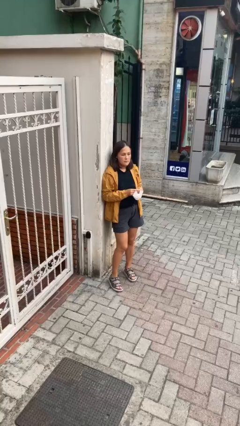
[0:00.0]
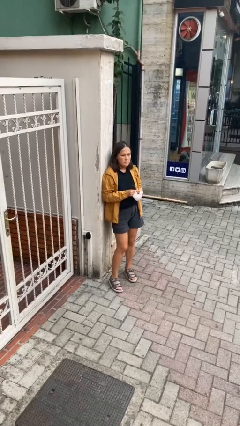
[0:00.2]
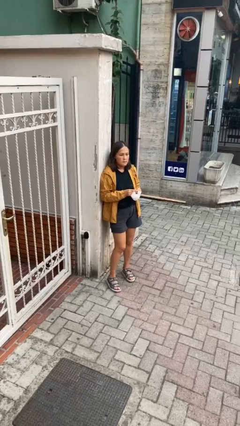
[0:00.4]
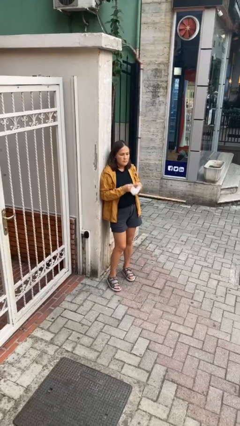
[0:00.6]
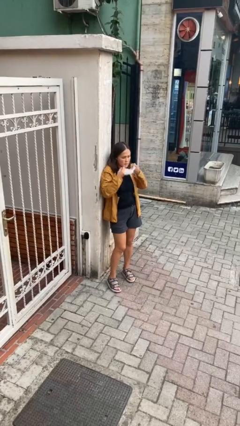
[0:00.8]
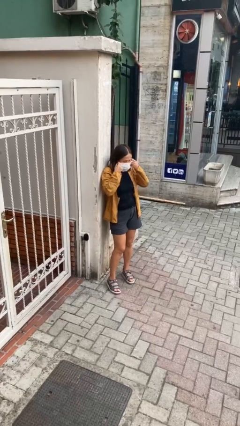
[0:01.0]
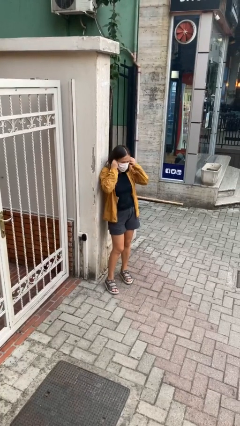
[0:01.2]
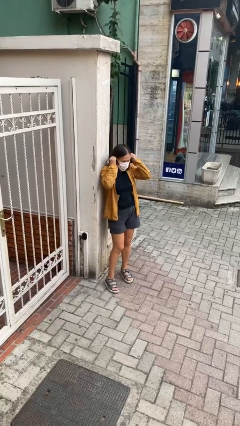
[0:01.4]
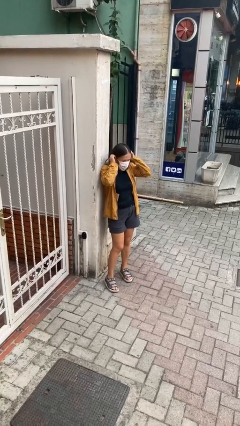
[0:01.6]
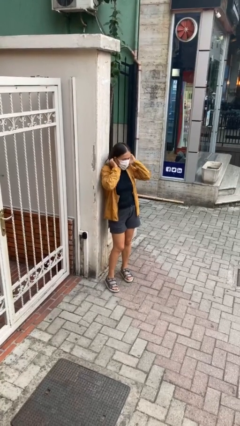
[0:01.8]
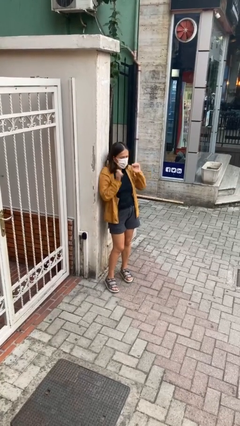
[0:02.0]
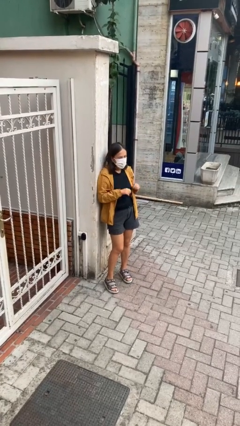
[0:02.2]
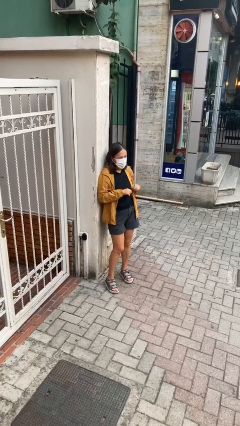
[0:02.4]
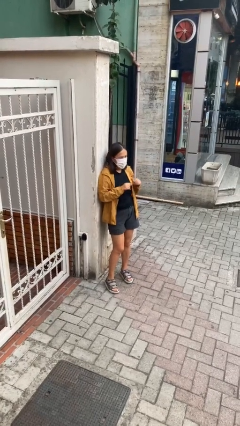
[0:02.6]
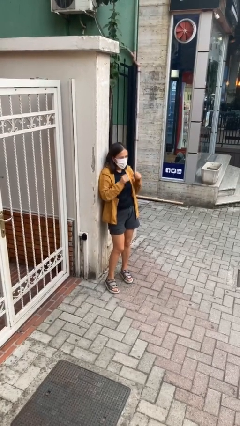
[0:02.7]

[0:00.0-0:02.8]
person puts on facemask

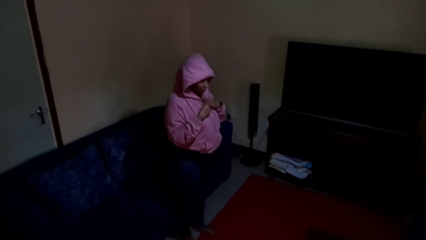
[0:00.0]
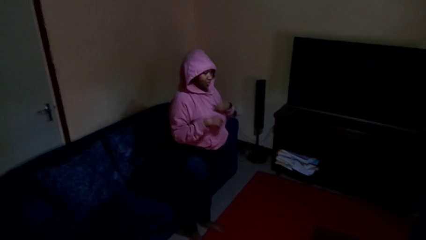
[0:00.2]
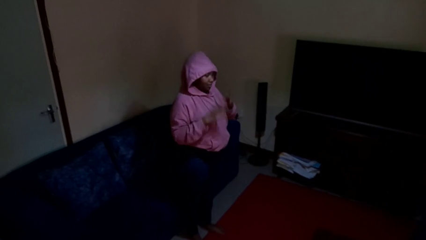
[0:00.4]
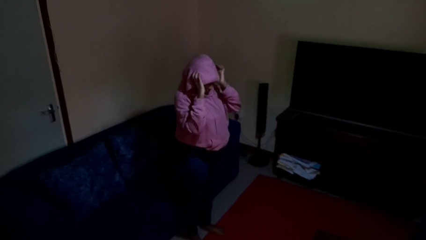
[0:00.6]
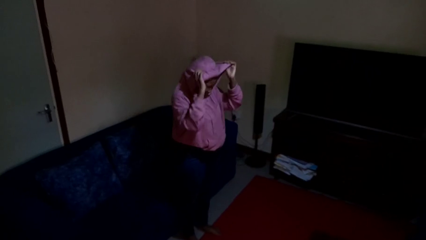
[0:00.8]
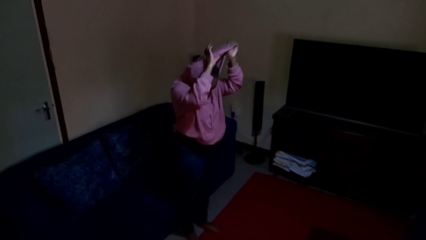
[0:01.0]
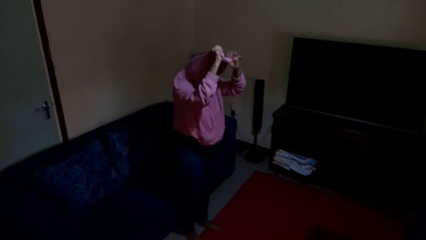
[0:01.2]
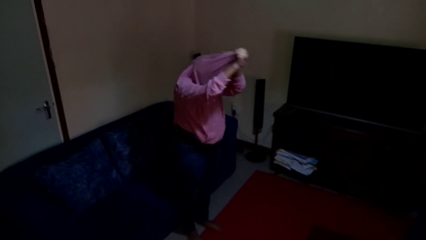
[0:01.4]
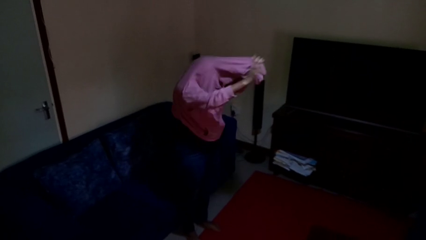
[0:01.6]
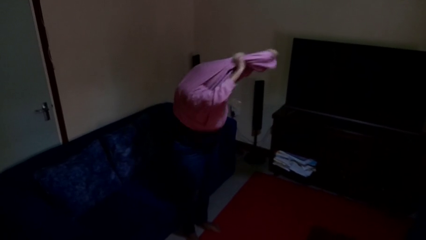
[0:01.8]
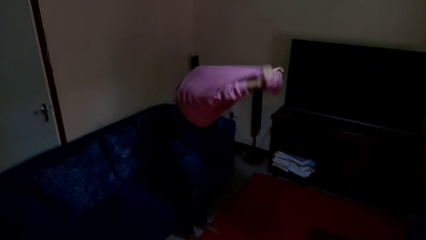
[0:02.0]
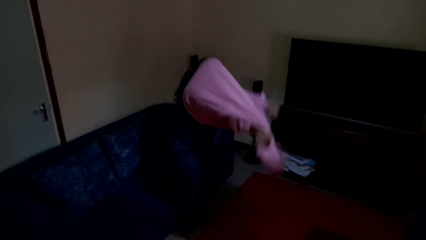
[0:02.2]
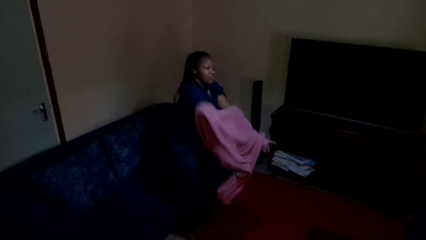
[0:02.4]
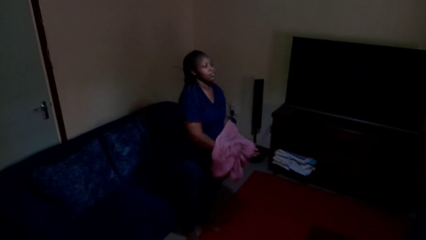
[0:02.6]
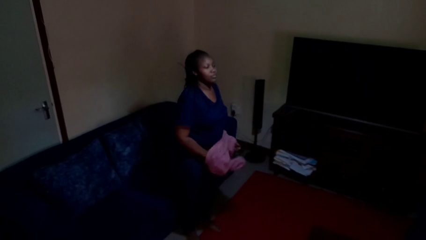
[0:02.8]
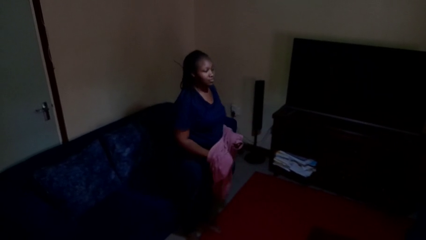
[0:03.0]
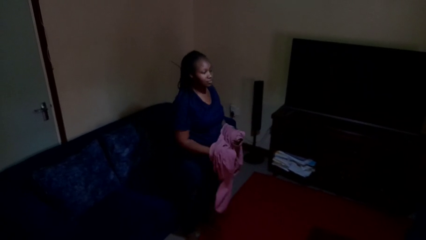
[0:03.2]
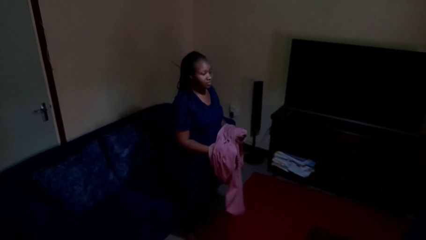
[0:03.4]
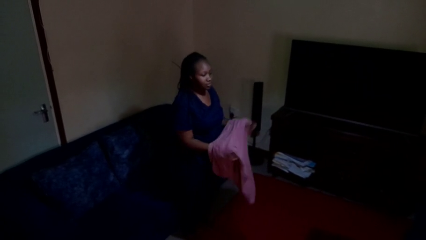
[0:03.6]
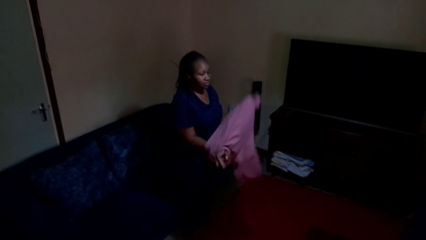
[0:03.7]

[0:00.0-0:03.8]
person takes off hoodie

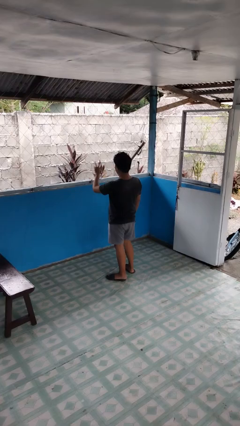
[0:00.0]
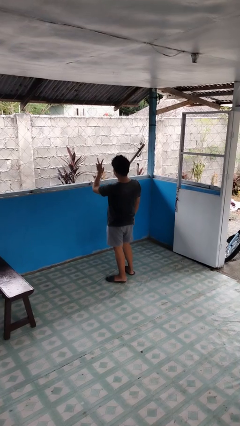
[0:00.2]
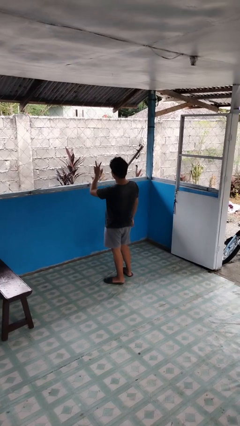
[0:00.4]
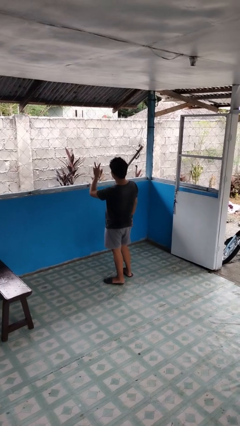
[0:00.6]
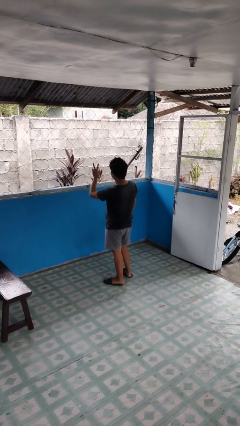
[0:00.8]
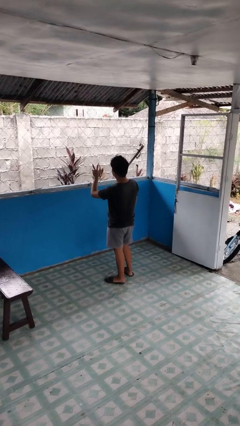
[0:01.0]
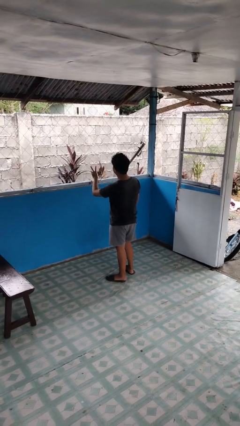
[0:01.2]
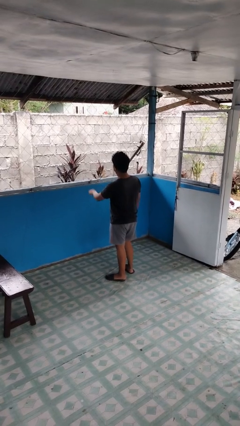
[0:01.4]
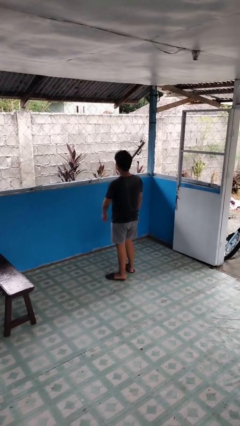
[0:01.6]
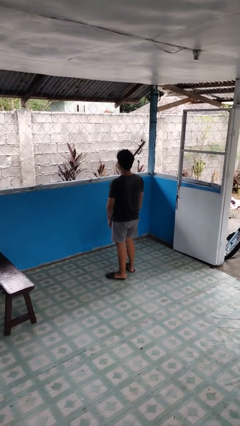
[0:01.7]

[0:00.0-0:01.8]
person gestures peace

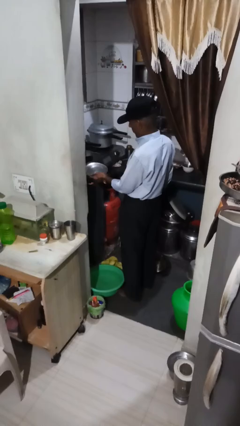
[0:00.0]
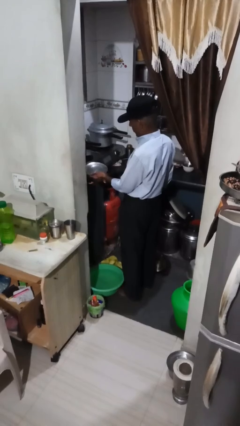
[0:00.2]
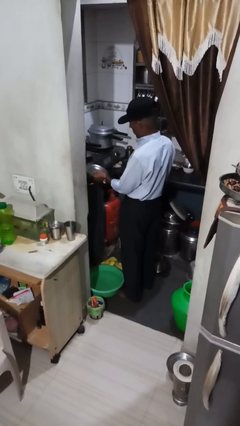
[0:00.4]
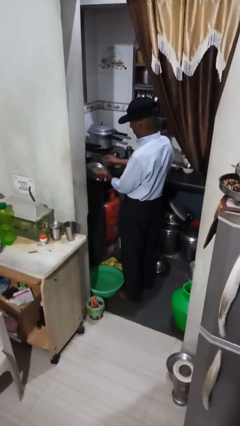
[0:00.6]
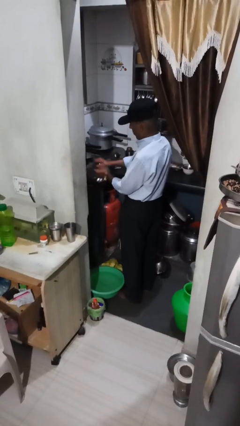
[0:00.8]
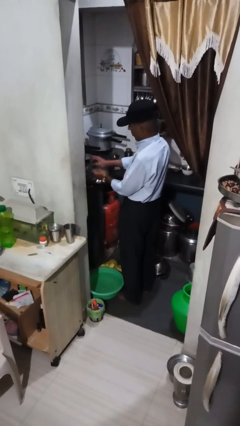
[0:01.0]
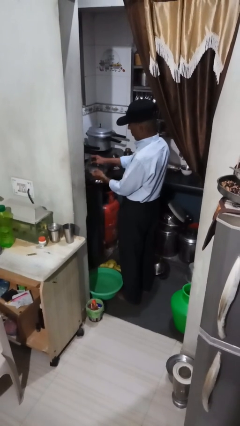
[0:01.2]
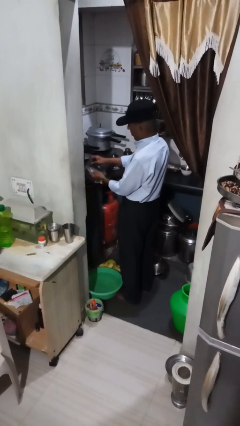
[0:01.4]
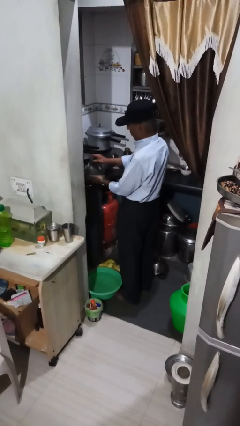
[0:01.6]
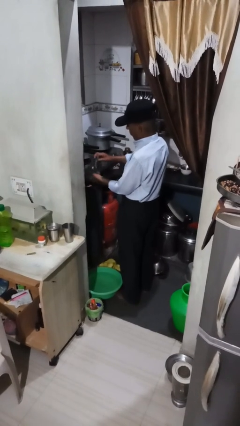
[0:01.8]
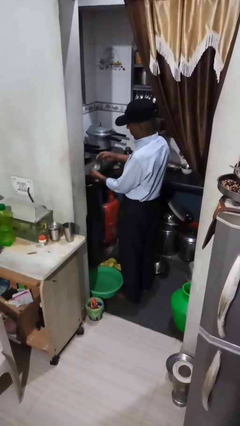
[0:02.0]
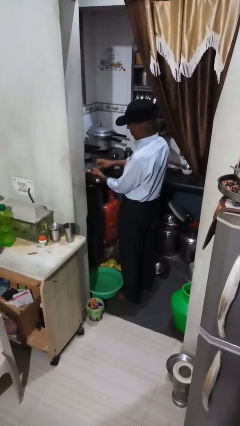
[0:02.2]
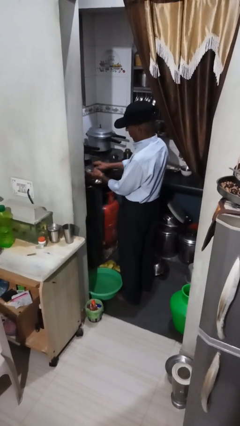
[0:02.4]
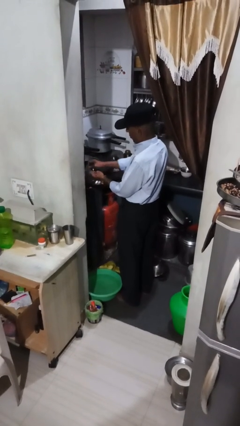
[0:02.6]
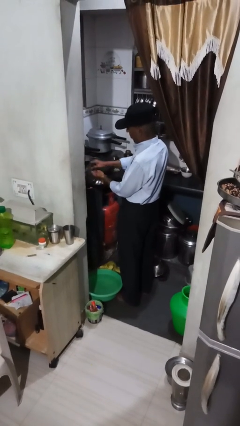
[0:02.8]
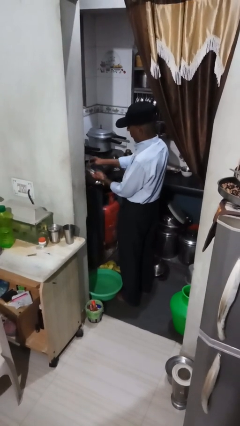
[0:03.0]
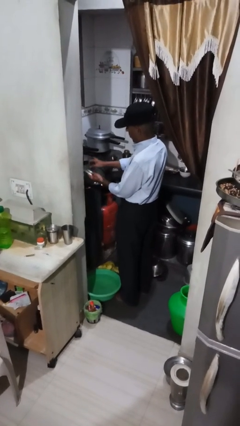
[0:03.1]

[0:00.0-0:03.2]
person washes dish

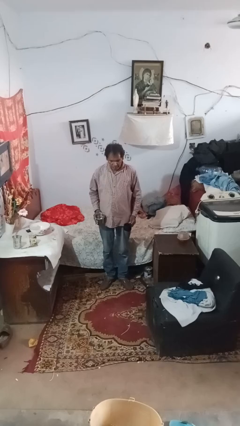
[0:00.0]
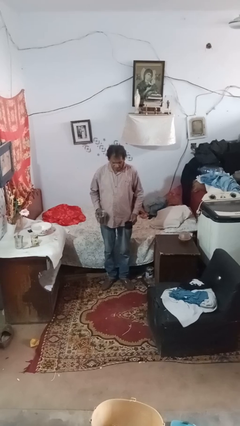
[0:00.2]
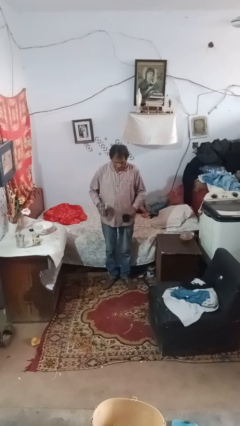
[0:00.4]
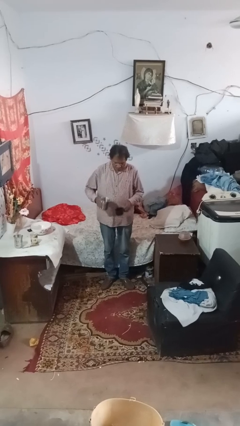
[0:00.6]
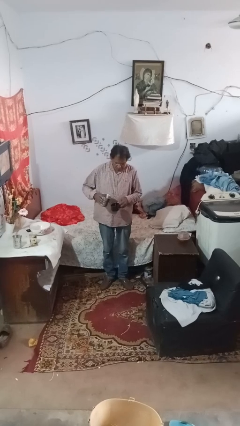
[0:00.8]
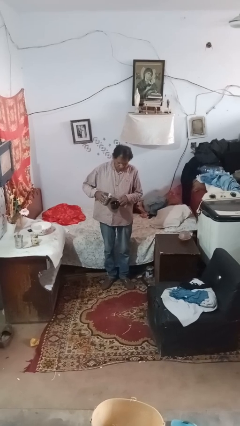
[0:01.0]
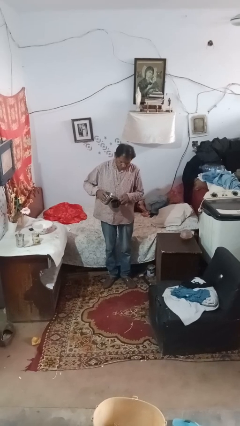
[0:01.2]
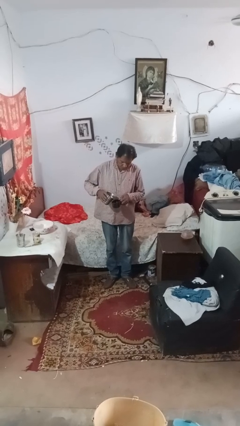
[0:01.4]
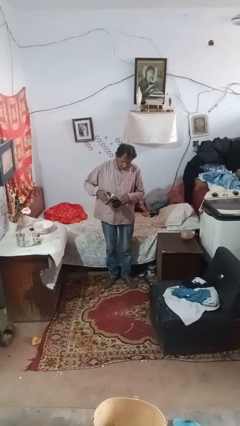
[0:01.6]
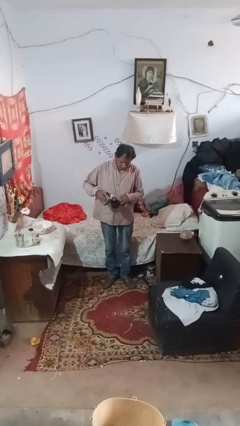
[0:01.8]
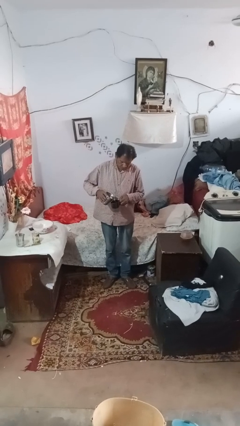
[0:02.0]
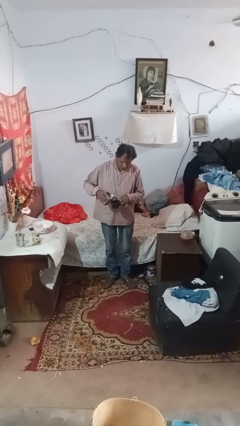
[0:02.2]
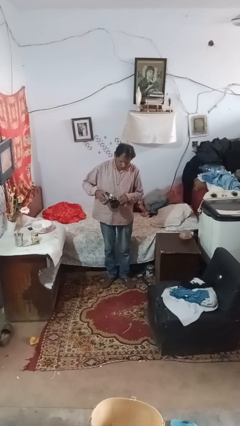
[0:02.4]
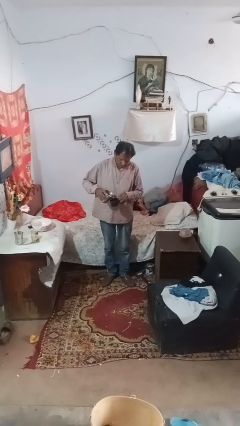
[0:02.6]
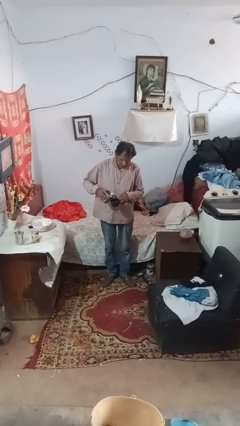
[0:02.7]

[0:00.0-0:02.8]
person pours liquid into cup

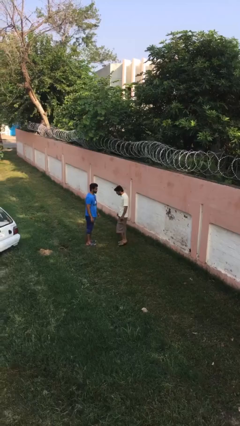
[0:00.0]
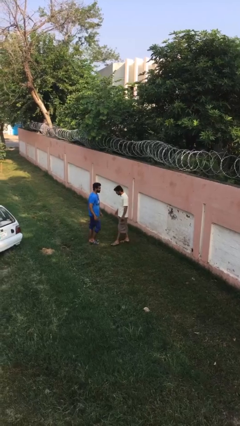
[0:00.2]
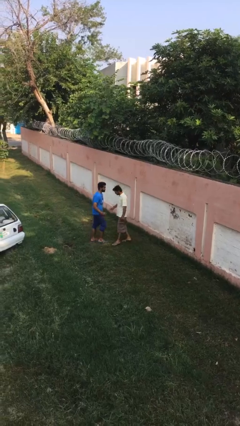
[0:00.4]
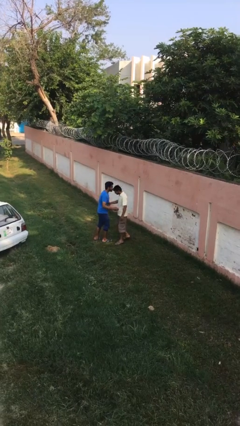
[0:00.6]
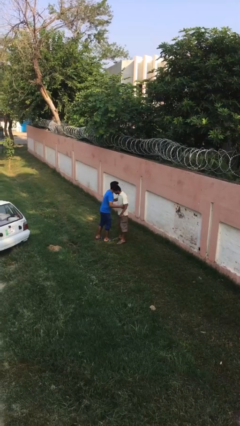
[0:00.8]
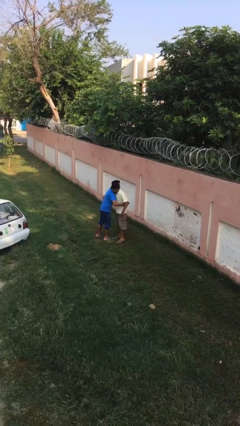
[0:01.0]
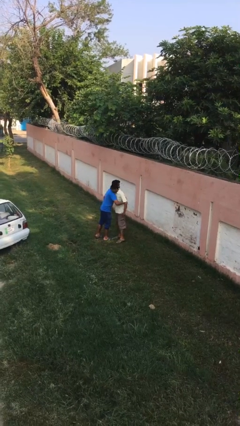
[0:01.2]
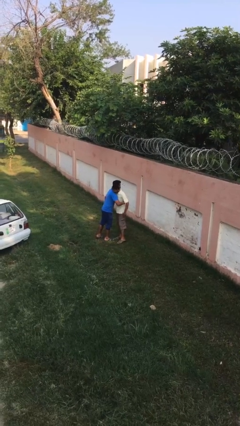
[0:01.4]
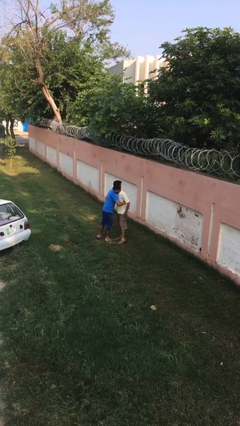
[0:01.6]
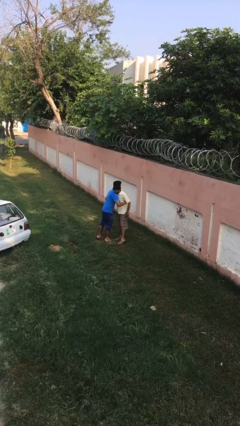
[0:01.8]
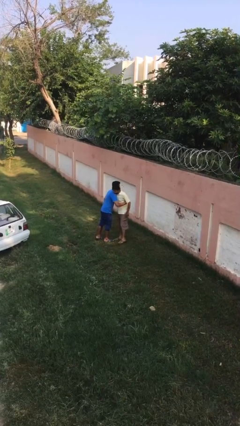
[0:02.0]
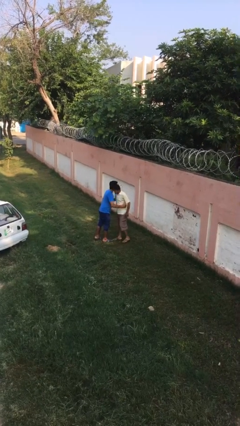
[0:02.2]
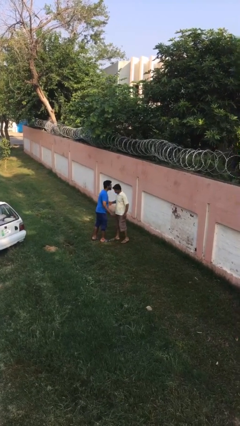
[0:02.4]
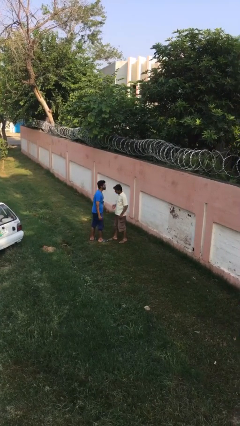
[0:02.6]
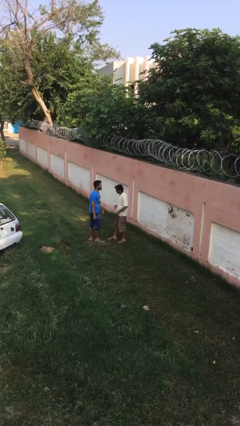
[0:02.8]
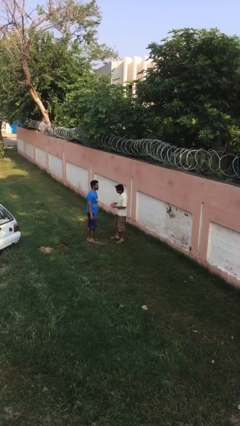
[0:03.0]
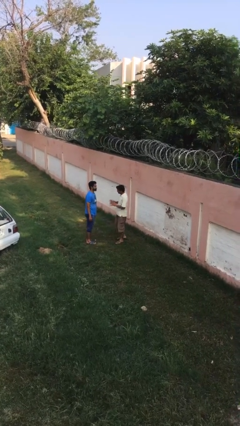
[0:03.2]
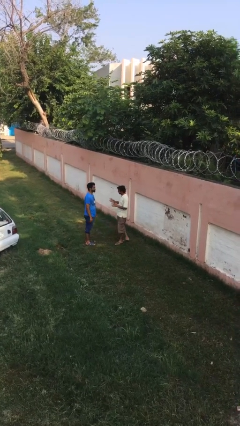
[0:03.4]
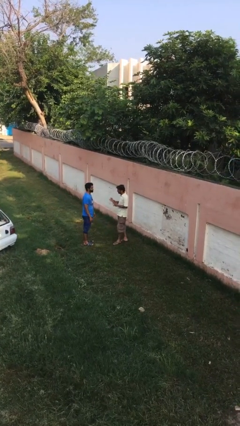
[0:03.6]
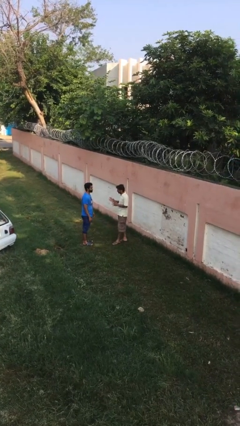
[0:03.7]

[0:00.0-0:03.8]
person embraces person
